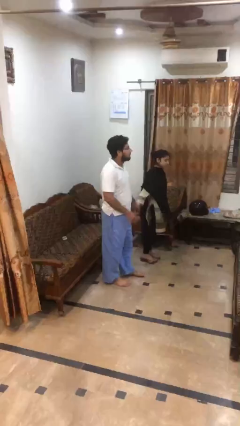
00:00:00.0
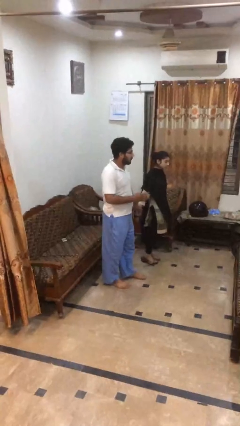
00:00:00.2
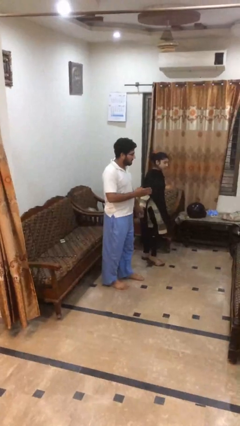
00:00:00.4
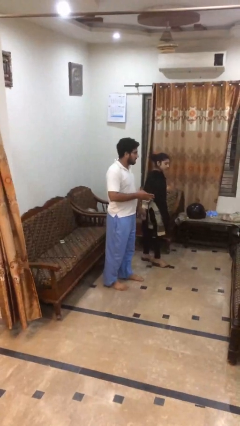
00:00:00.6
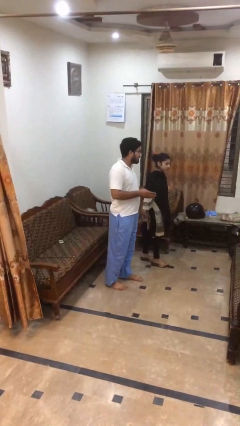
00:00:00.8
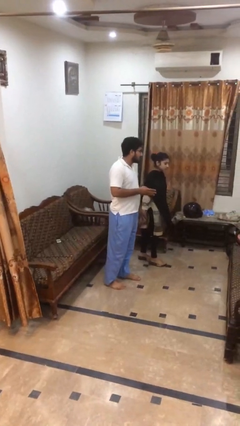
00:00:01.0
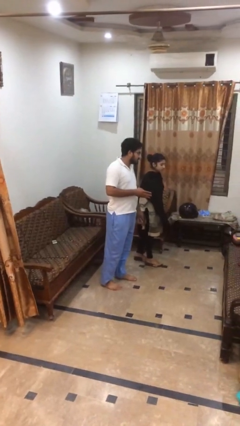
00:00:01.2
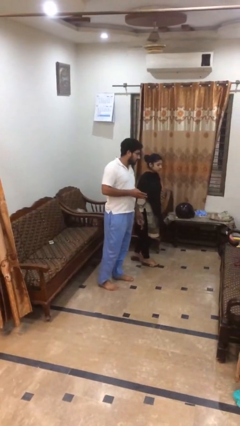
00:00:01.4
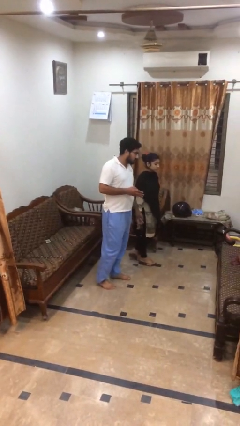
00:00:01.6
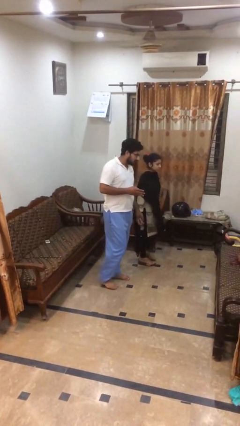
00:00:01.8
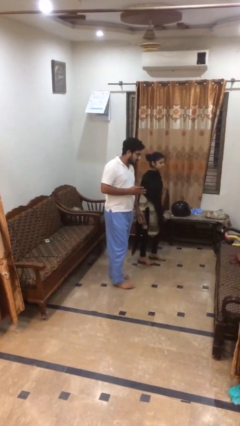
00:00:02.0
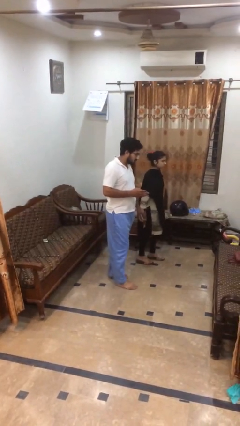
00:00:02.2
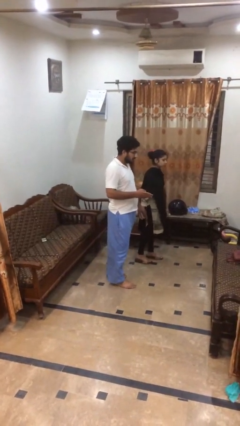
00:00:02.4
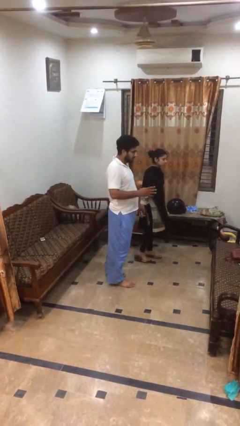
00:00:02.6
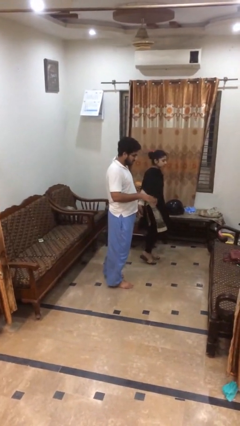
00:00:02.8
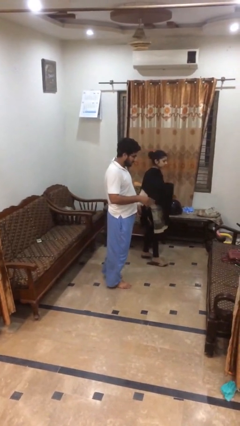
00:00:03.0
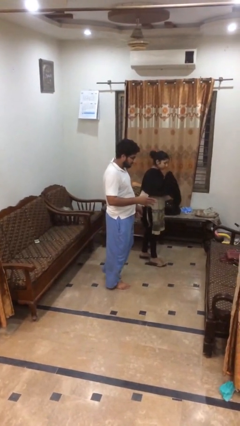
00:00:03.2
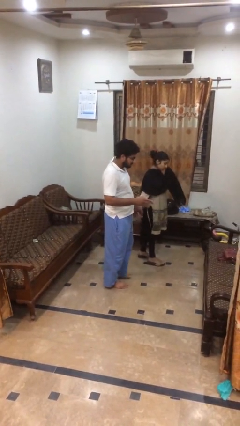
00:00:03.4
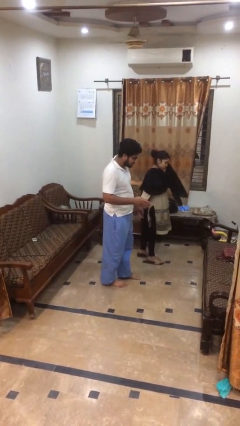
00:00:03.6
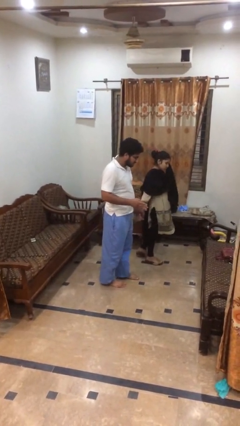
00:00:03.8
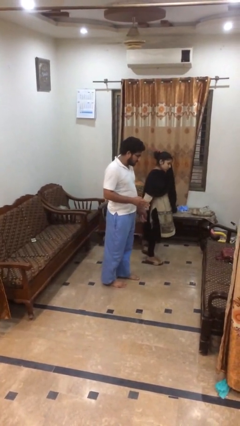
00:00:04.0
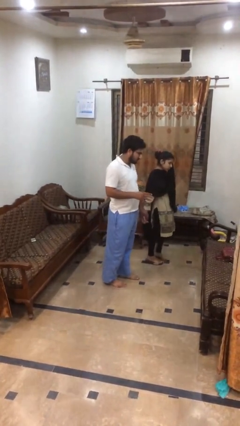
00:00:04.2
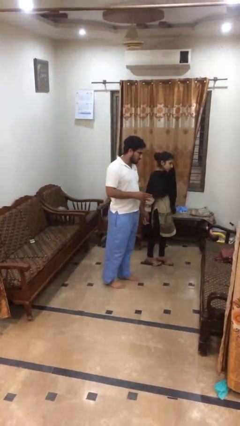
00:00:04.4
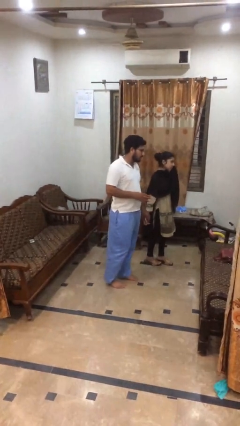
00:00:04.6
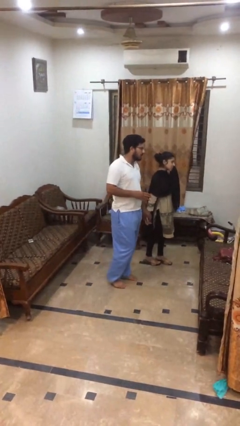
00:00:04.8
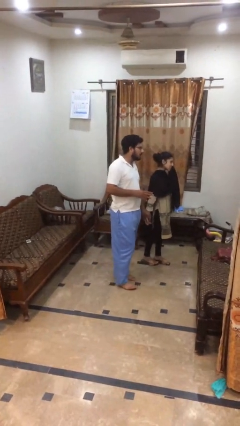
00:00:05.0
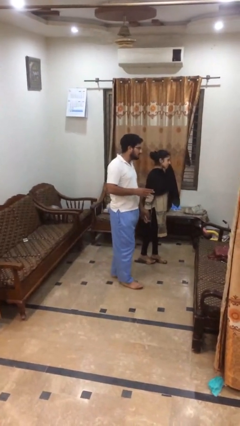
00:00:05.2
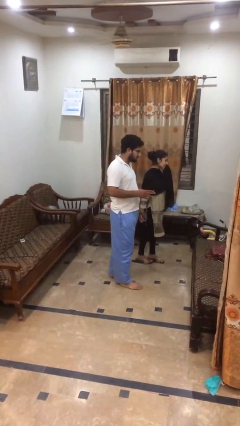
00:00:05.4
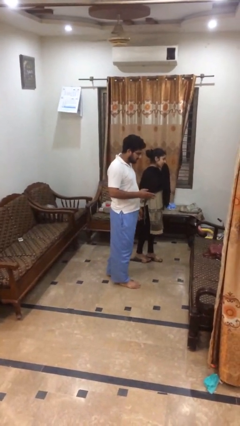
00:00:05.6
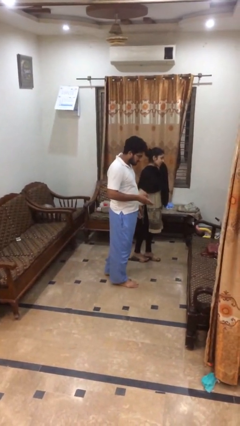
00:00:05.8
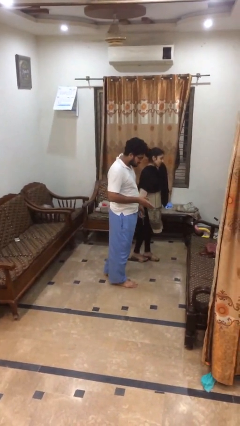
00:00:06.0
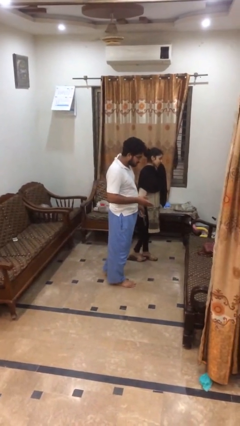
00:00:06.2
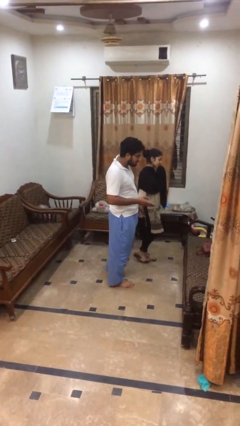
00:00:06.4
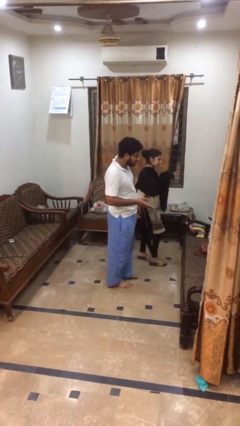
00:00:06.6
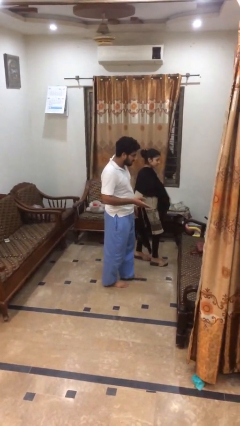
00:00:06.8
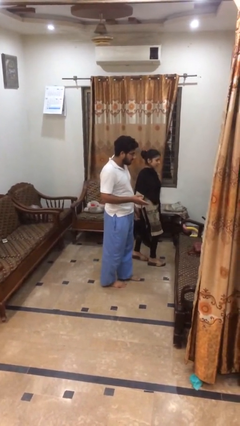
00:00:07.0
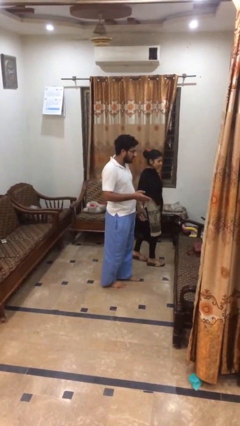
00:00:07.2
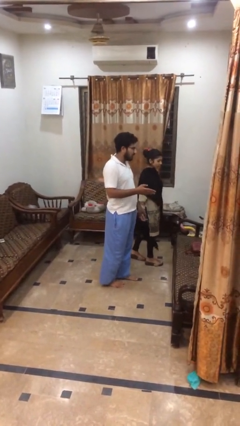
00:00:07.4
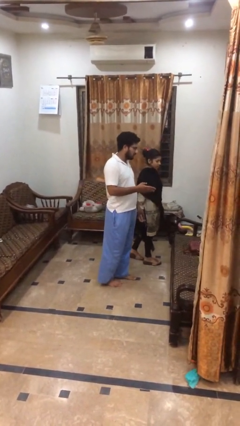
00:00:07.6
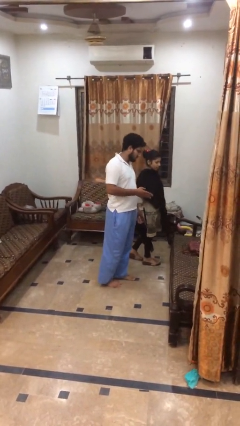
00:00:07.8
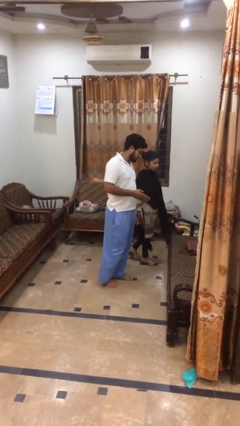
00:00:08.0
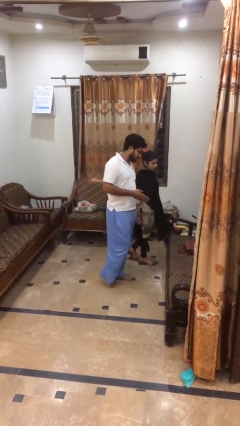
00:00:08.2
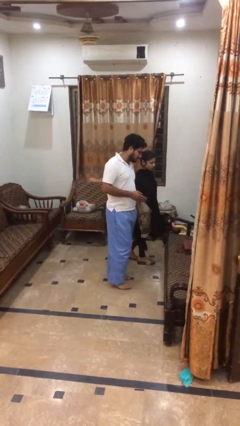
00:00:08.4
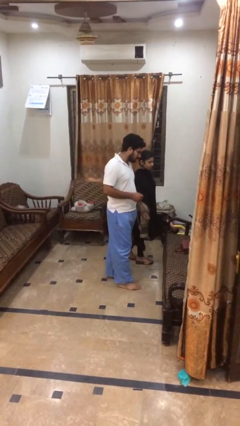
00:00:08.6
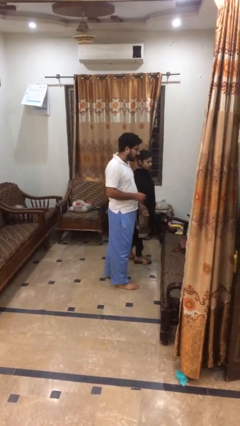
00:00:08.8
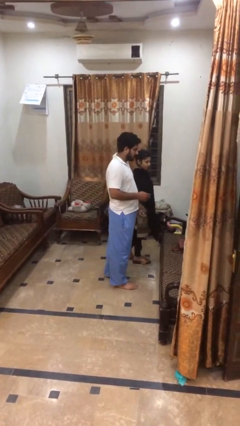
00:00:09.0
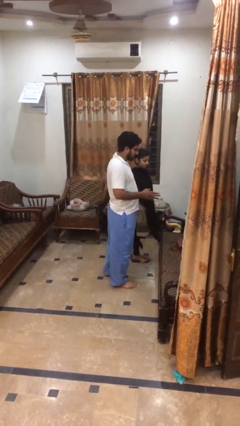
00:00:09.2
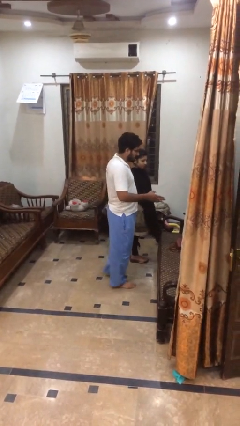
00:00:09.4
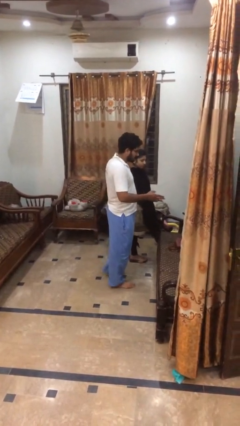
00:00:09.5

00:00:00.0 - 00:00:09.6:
person holds hand

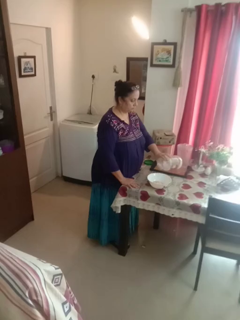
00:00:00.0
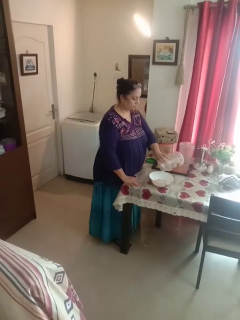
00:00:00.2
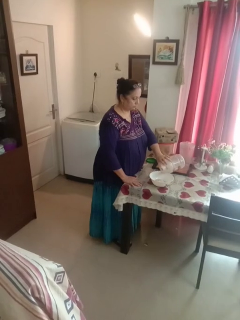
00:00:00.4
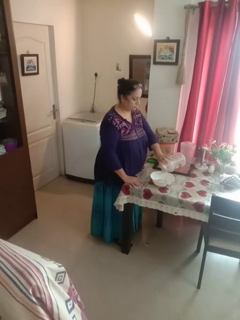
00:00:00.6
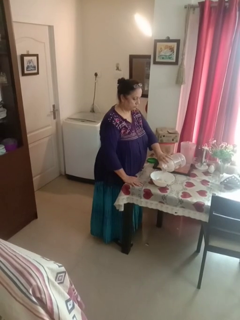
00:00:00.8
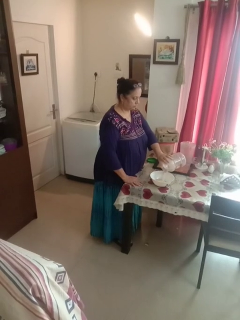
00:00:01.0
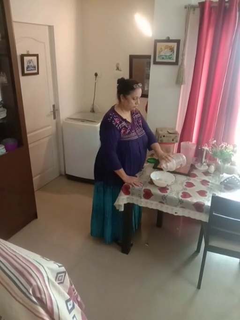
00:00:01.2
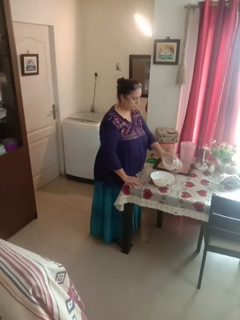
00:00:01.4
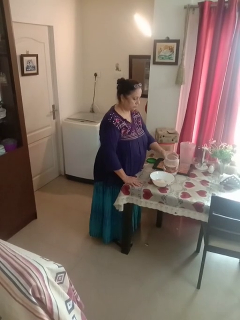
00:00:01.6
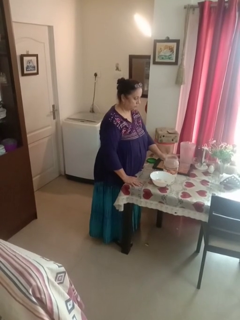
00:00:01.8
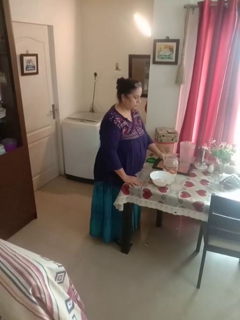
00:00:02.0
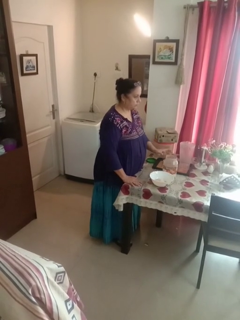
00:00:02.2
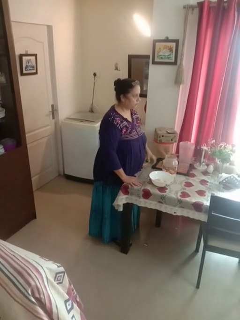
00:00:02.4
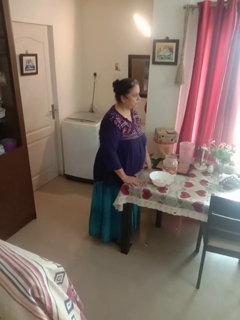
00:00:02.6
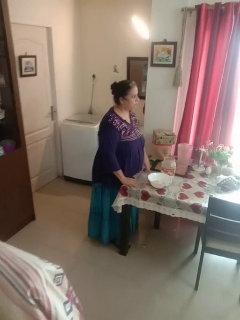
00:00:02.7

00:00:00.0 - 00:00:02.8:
person pours into bowl

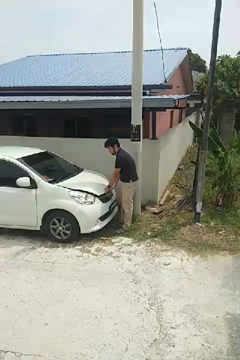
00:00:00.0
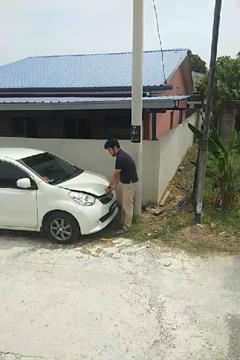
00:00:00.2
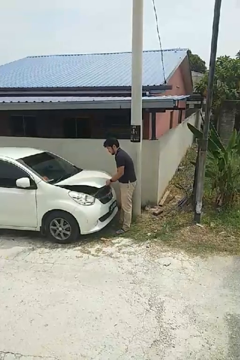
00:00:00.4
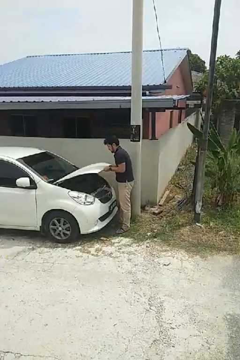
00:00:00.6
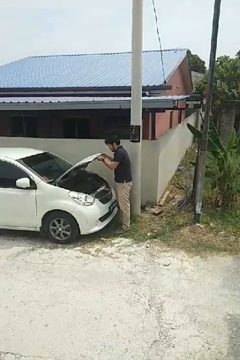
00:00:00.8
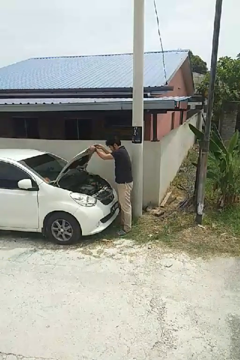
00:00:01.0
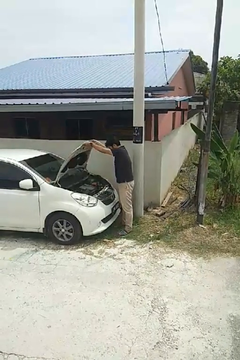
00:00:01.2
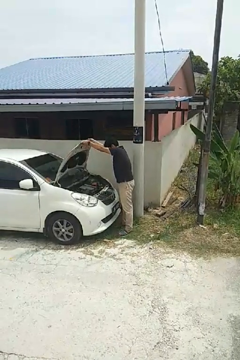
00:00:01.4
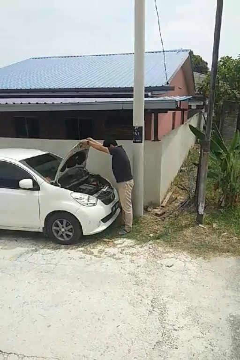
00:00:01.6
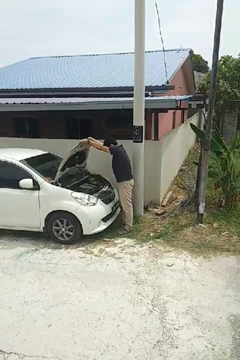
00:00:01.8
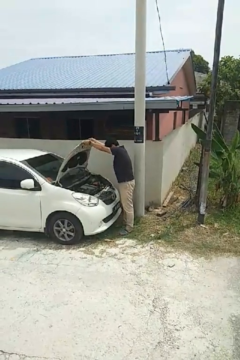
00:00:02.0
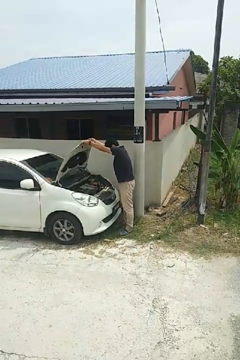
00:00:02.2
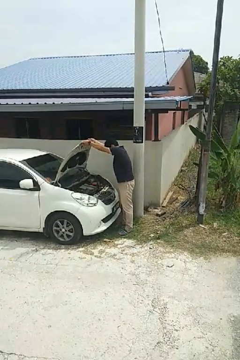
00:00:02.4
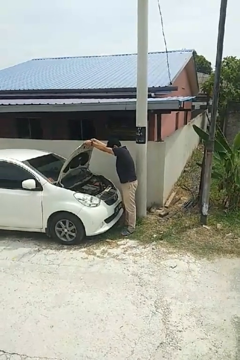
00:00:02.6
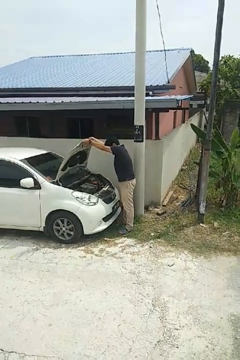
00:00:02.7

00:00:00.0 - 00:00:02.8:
person opens car hood

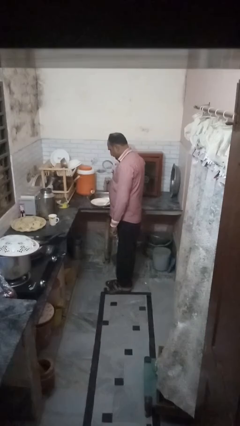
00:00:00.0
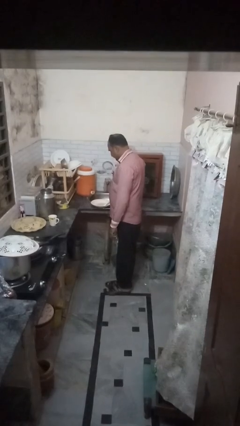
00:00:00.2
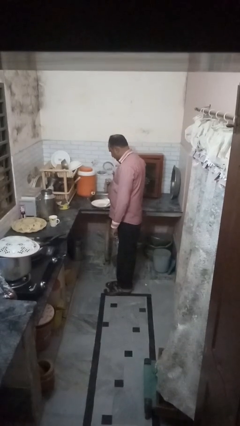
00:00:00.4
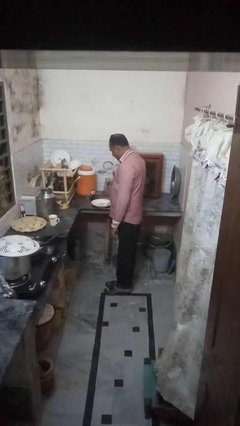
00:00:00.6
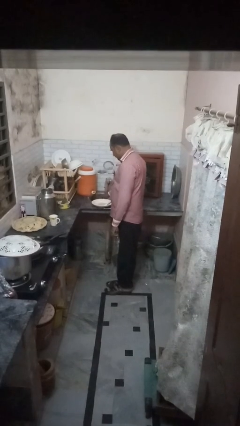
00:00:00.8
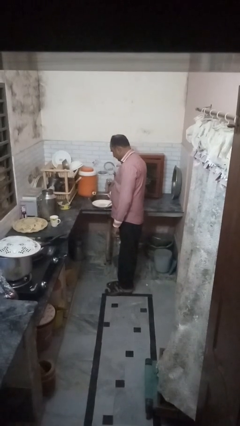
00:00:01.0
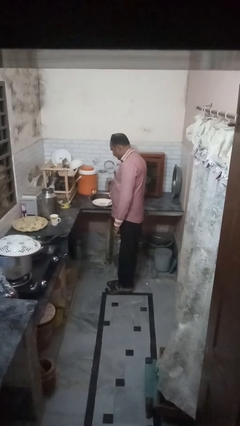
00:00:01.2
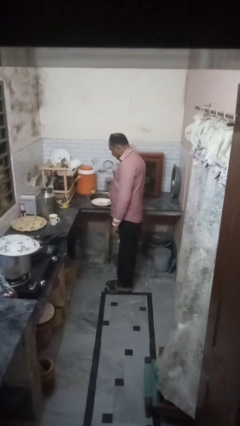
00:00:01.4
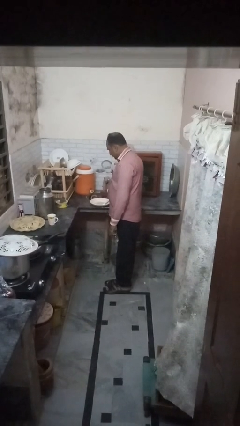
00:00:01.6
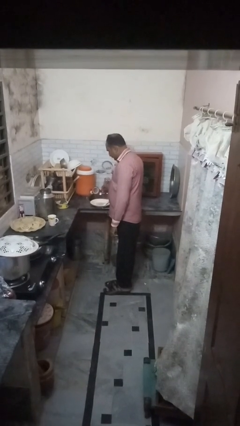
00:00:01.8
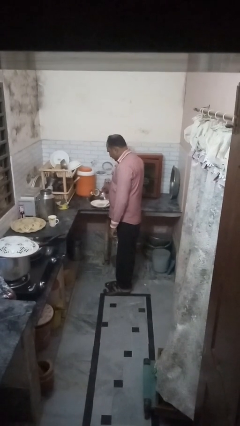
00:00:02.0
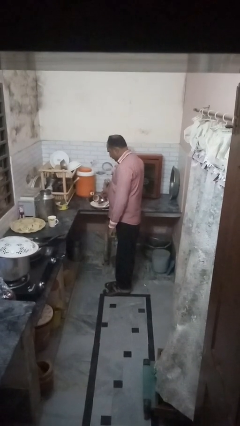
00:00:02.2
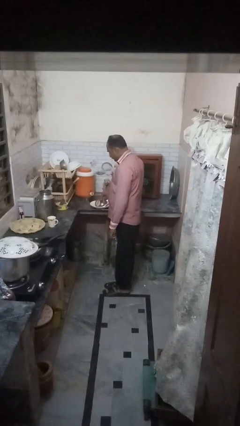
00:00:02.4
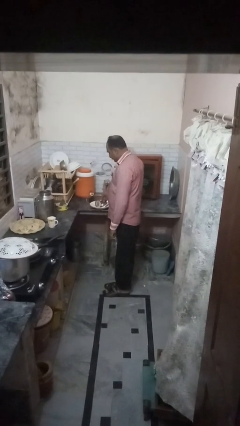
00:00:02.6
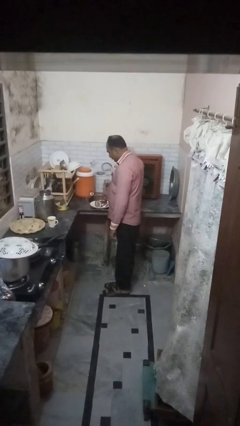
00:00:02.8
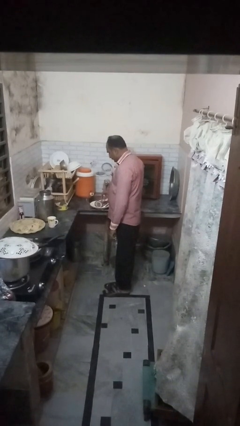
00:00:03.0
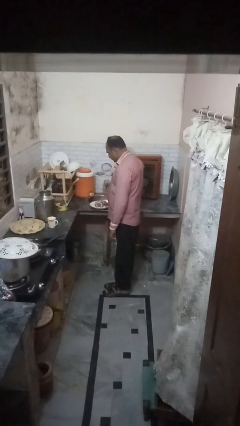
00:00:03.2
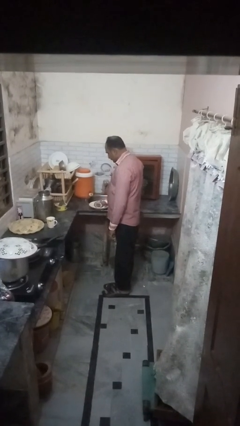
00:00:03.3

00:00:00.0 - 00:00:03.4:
person unloads dishwasher

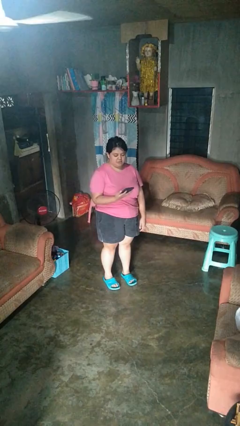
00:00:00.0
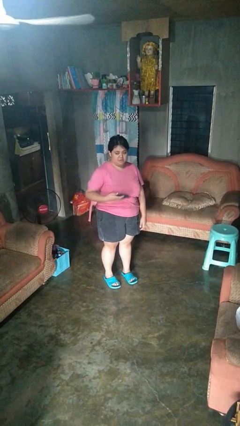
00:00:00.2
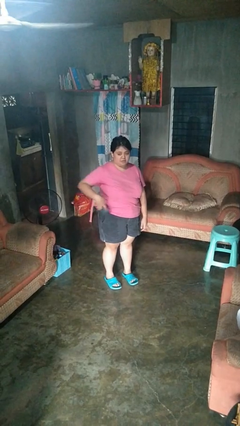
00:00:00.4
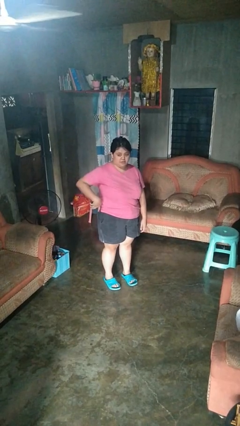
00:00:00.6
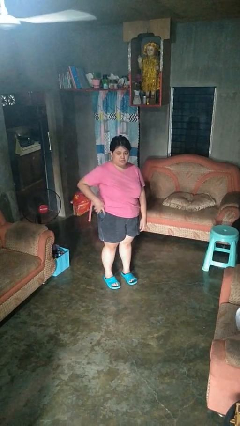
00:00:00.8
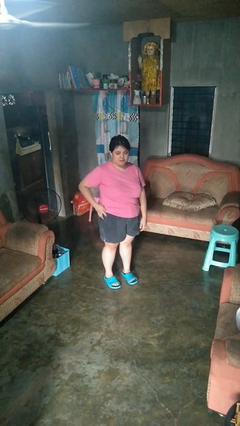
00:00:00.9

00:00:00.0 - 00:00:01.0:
person puts phone into pocket
